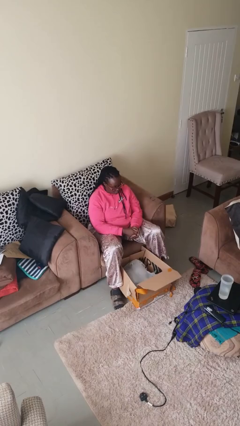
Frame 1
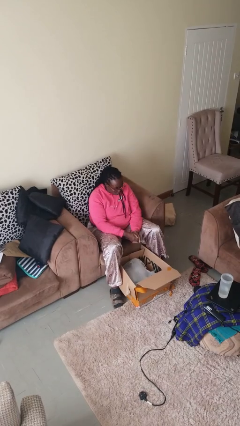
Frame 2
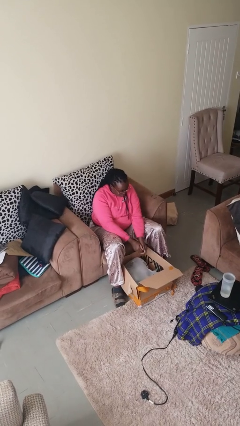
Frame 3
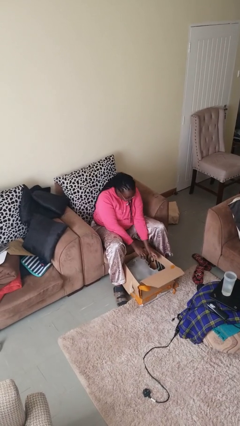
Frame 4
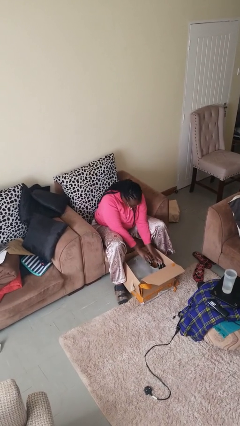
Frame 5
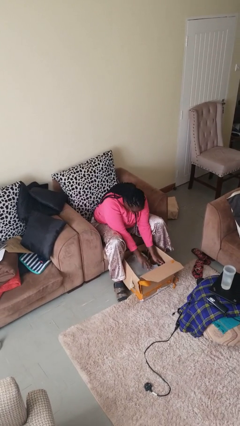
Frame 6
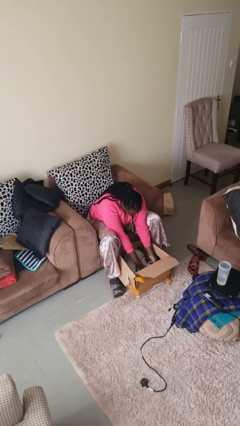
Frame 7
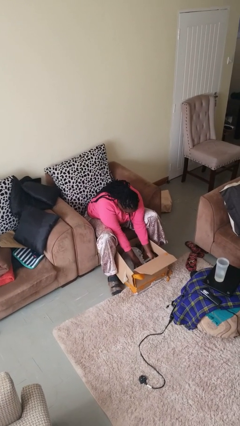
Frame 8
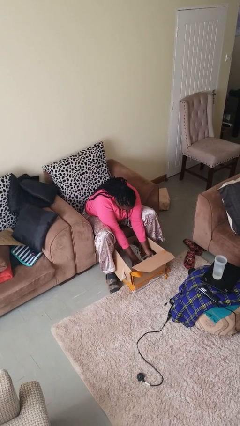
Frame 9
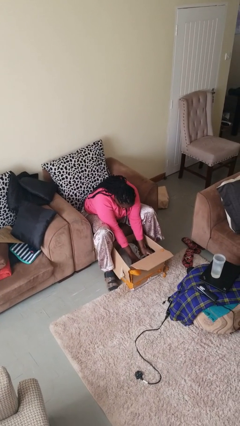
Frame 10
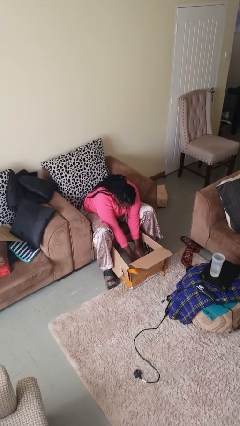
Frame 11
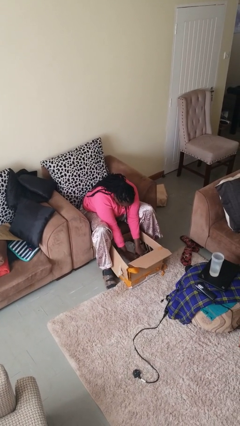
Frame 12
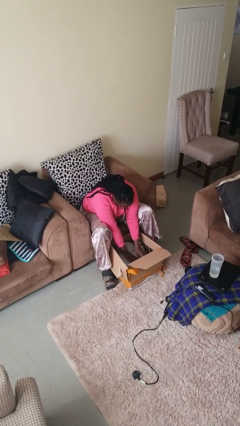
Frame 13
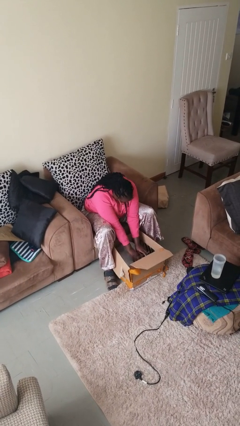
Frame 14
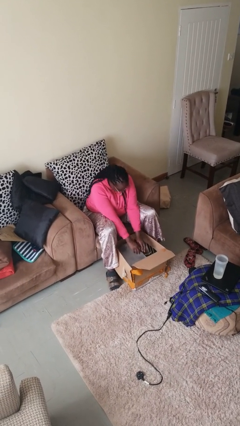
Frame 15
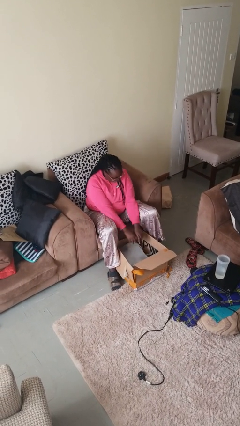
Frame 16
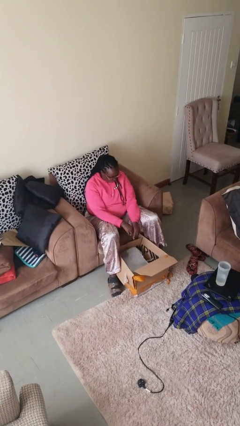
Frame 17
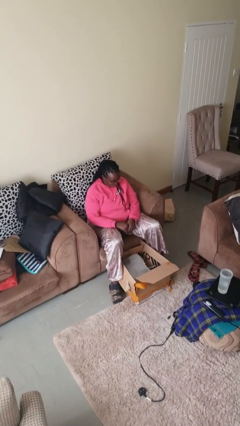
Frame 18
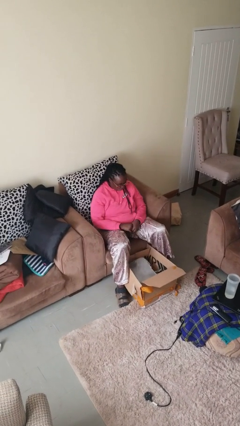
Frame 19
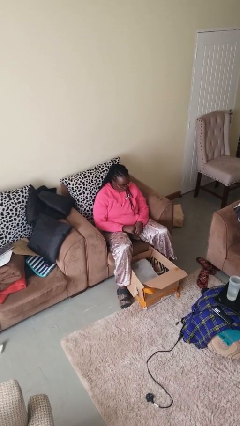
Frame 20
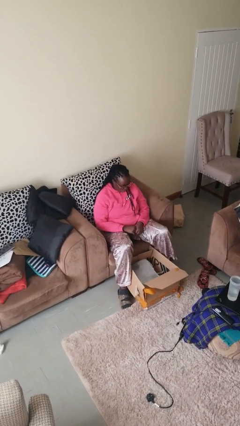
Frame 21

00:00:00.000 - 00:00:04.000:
person searches in box

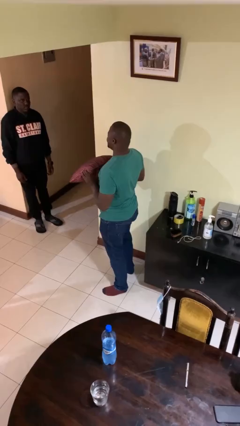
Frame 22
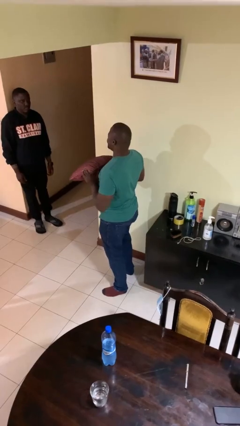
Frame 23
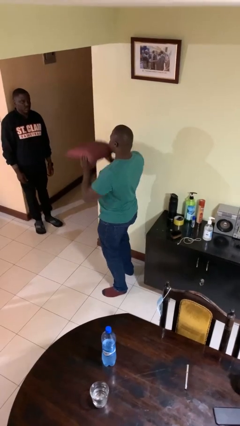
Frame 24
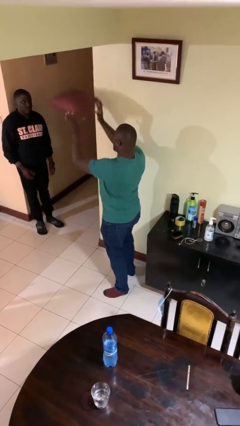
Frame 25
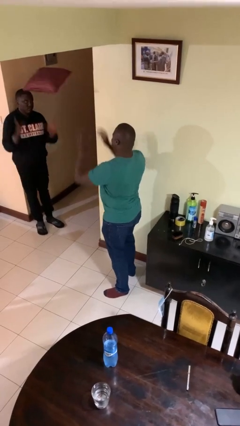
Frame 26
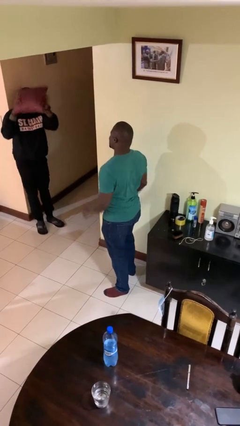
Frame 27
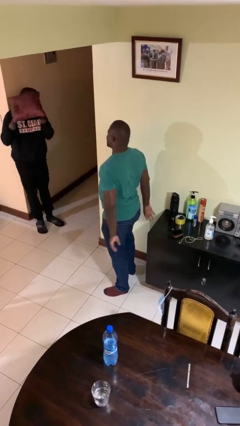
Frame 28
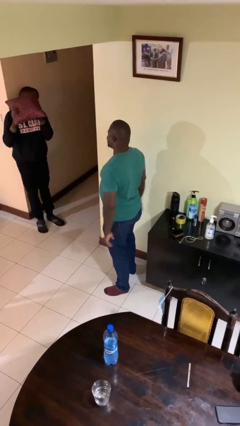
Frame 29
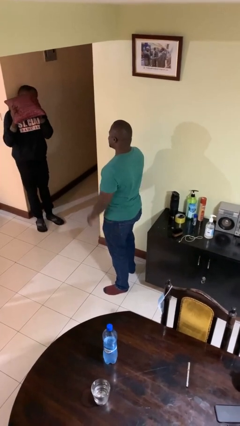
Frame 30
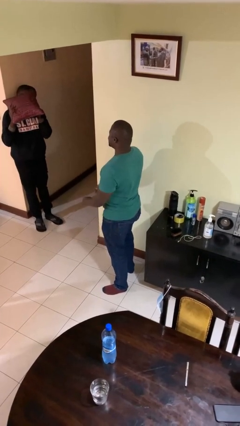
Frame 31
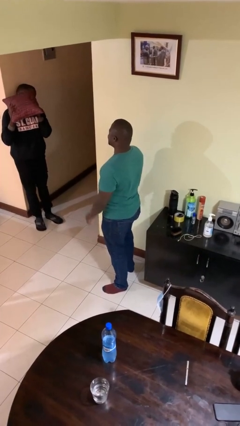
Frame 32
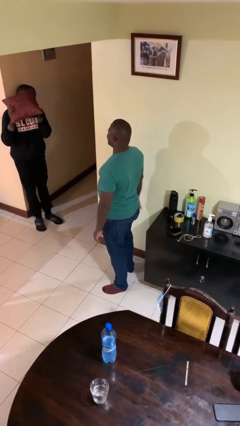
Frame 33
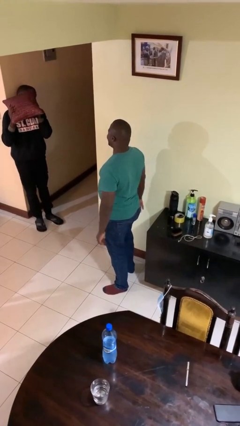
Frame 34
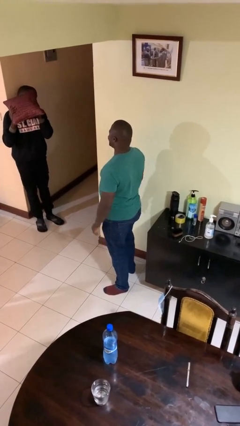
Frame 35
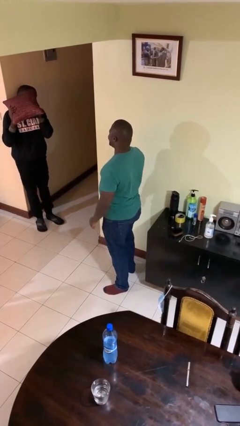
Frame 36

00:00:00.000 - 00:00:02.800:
person throws object to person

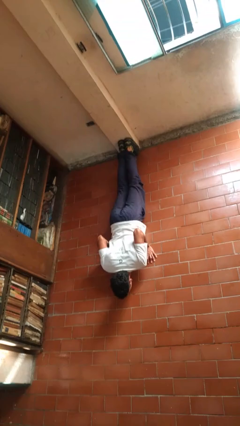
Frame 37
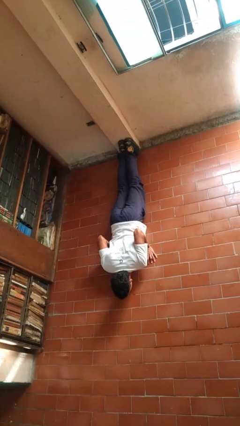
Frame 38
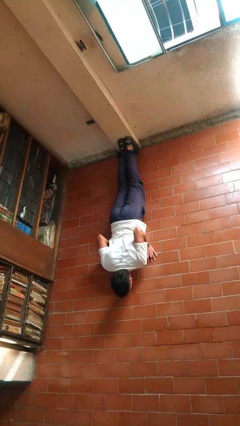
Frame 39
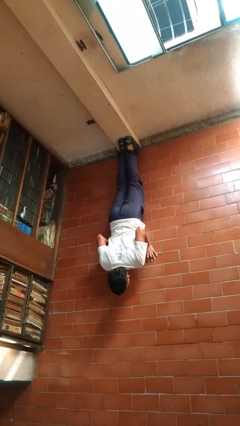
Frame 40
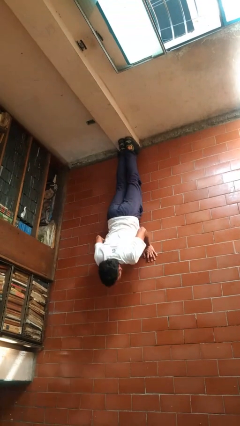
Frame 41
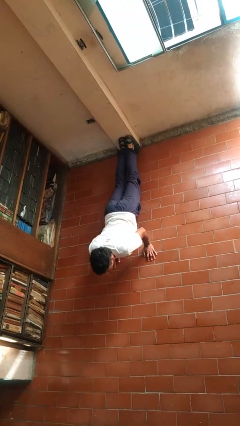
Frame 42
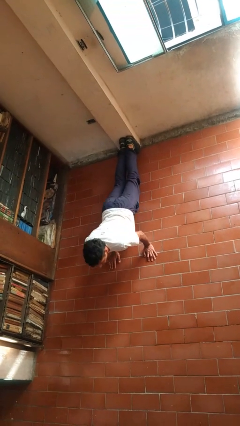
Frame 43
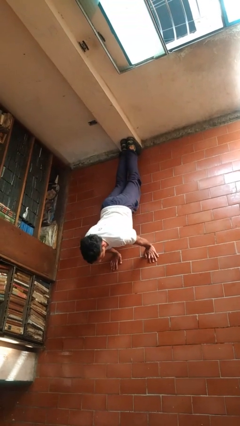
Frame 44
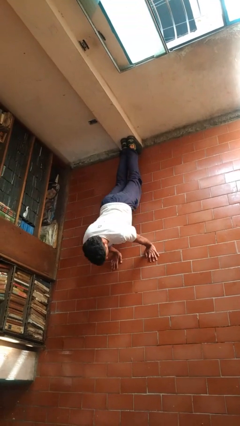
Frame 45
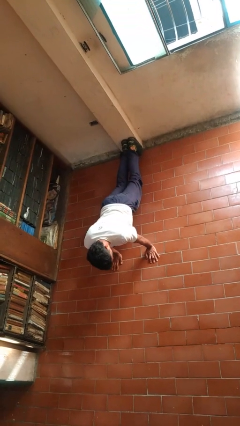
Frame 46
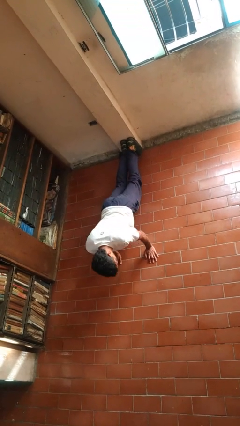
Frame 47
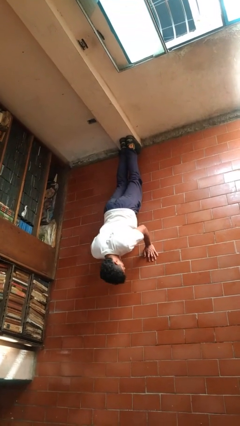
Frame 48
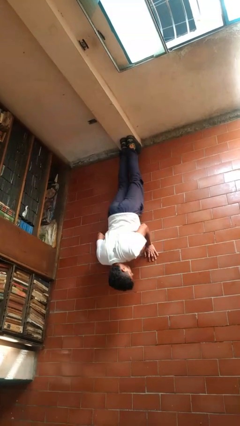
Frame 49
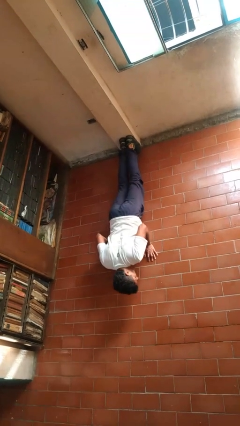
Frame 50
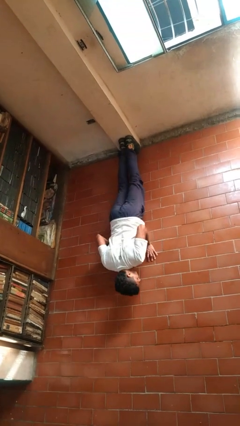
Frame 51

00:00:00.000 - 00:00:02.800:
person exercises with pushup

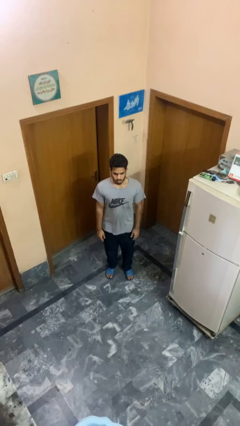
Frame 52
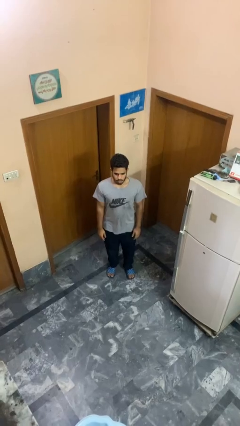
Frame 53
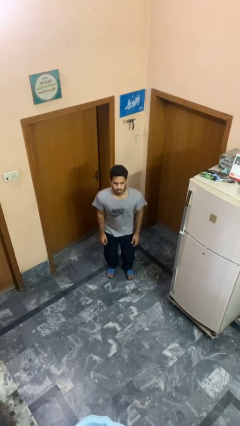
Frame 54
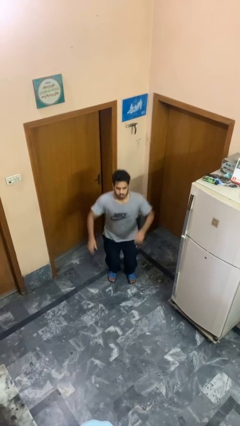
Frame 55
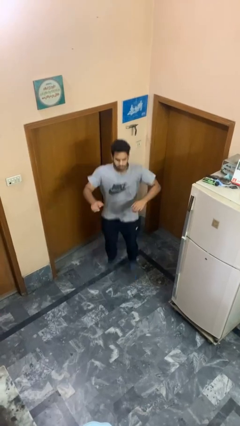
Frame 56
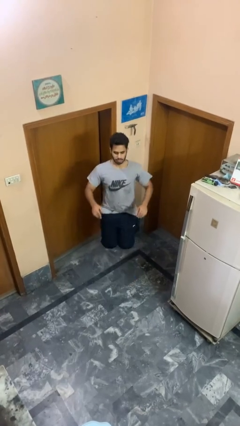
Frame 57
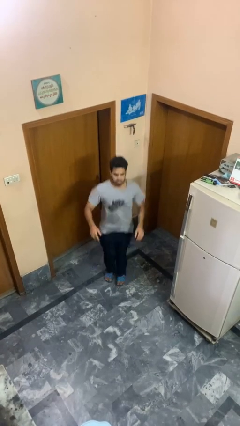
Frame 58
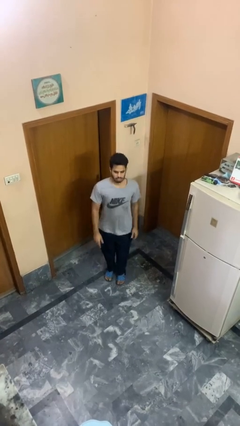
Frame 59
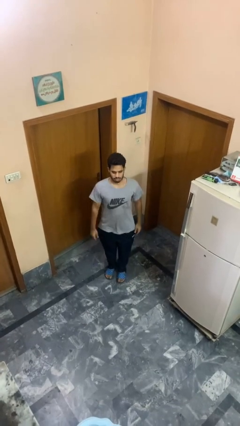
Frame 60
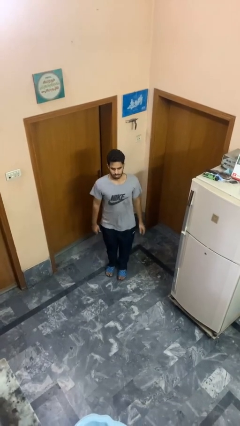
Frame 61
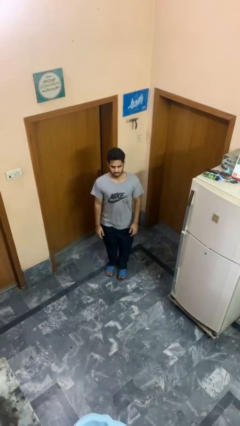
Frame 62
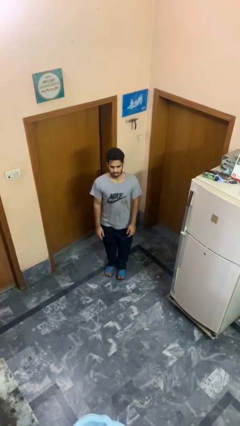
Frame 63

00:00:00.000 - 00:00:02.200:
person jumps

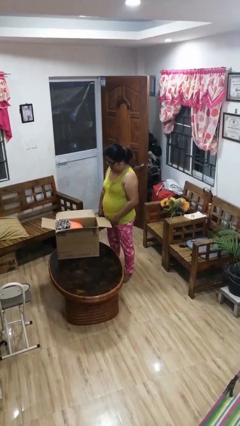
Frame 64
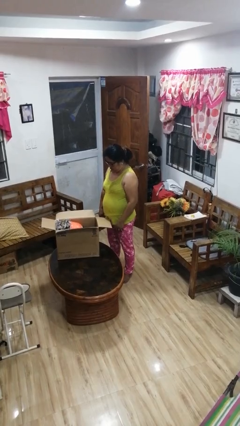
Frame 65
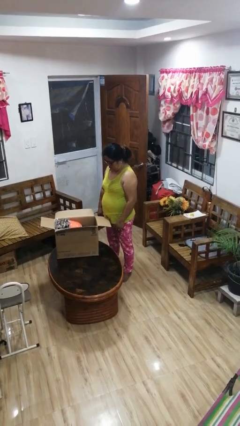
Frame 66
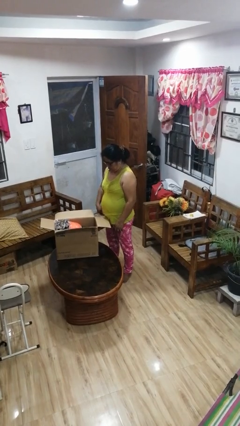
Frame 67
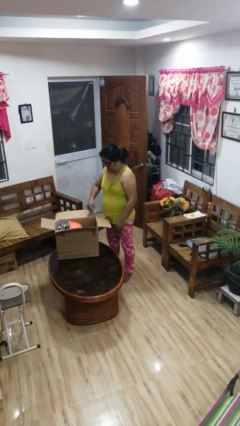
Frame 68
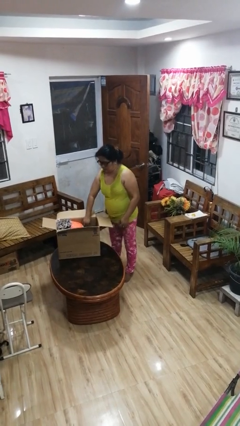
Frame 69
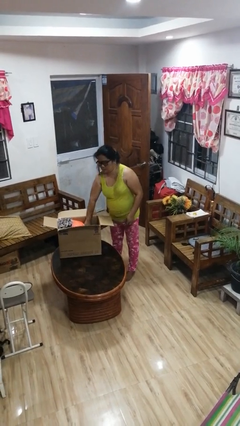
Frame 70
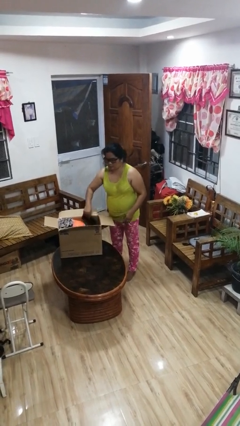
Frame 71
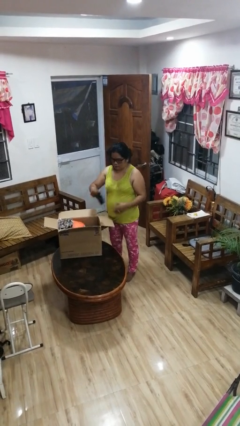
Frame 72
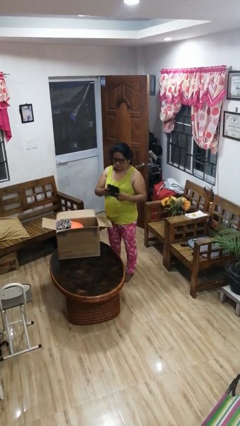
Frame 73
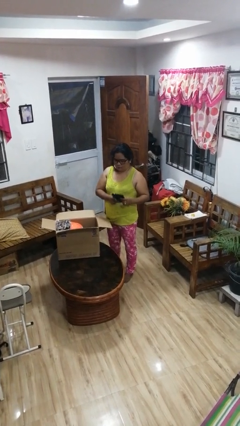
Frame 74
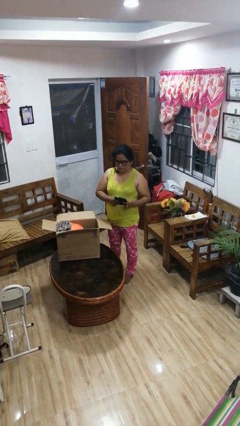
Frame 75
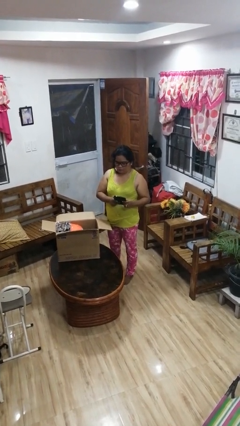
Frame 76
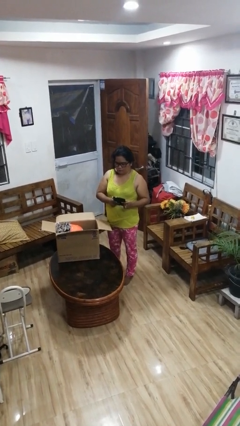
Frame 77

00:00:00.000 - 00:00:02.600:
person takes object from box

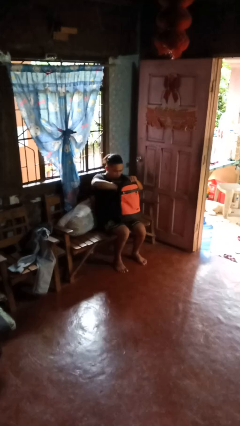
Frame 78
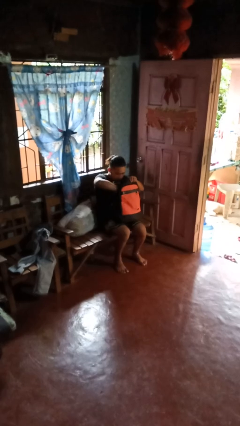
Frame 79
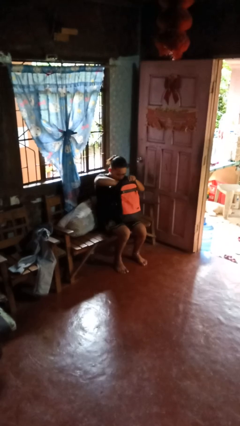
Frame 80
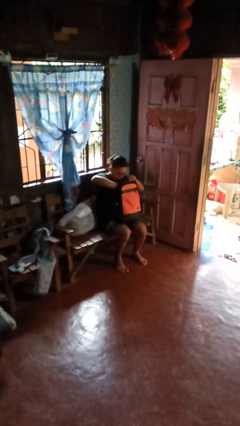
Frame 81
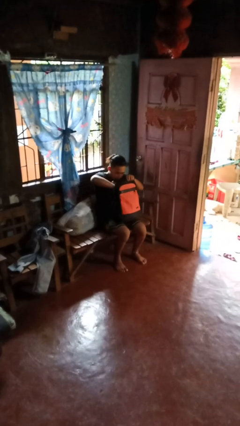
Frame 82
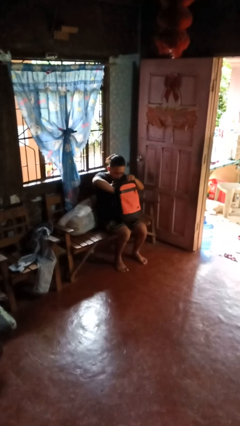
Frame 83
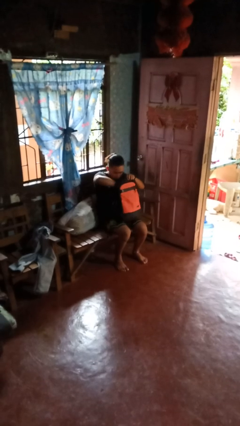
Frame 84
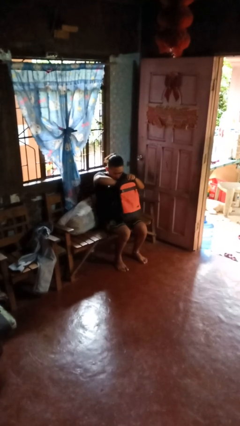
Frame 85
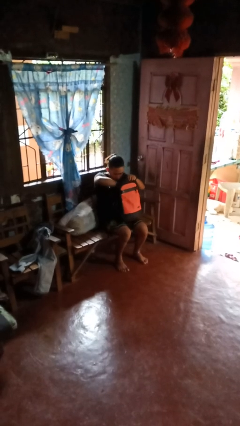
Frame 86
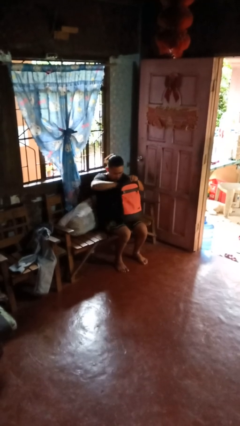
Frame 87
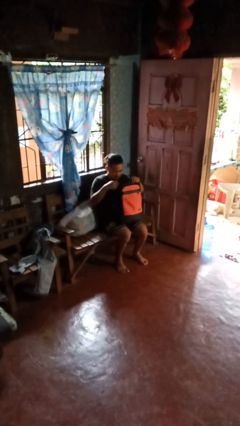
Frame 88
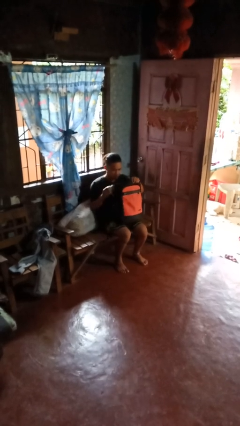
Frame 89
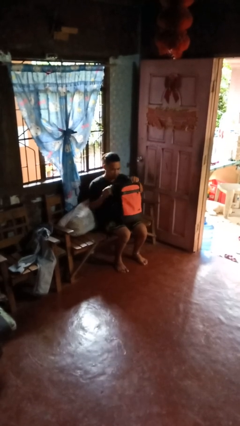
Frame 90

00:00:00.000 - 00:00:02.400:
person searches in bag

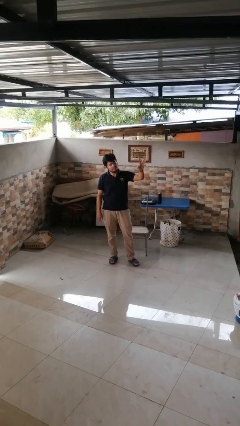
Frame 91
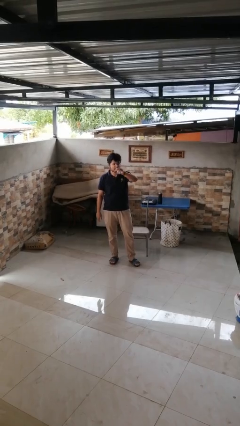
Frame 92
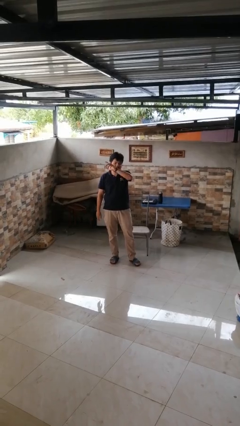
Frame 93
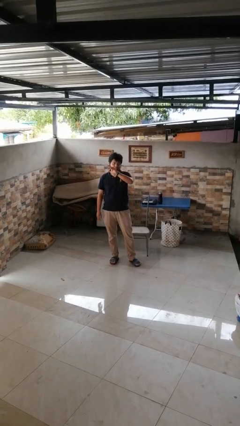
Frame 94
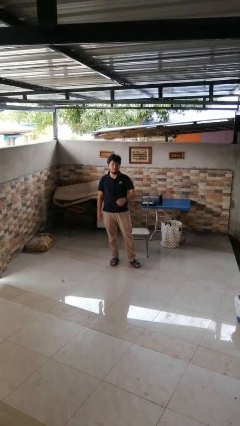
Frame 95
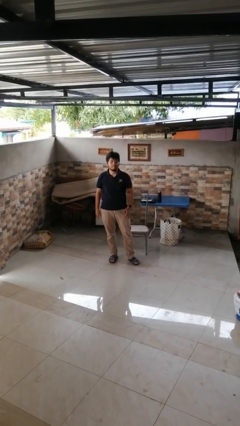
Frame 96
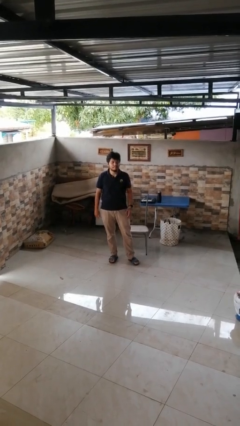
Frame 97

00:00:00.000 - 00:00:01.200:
person gestures swipe right
